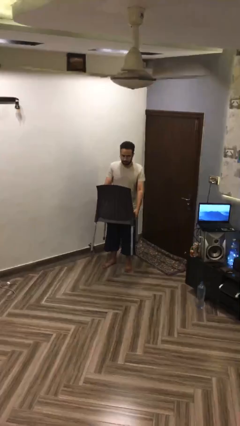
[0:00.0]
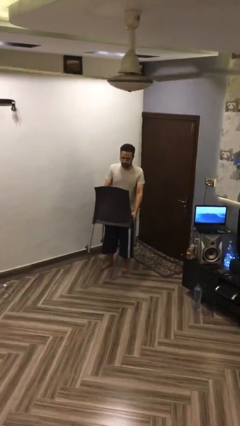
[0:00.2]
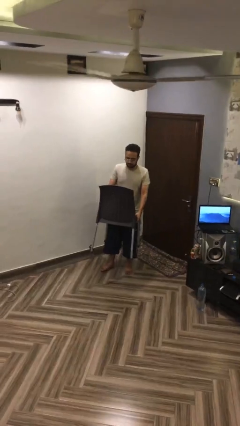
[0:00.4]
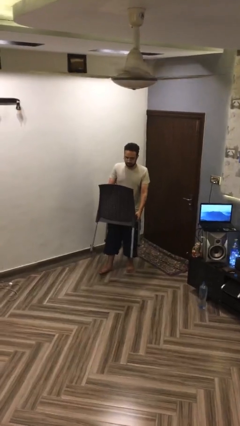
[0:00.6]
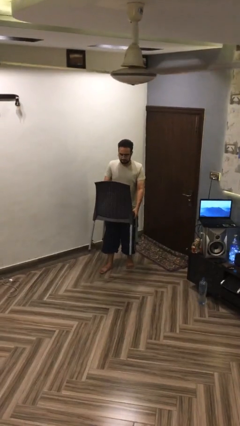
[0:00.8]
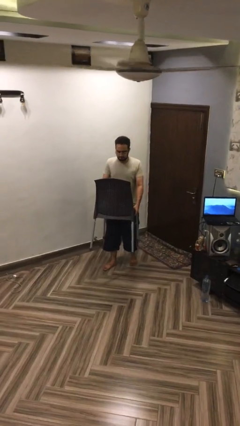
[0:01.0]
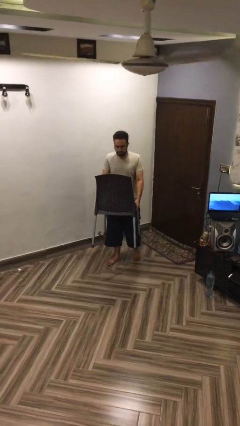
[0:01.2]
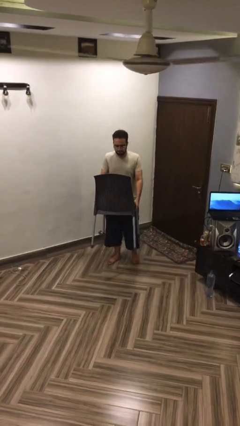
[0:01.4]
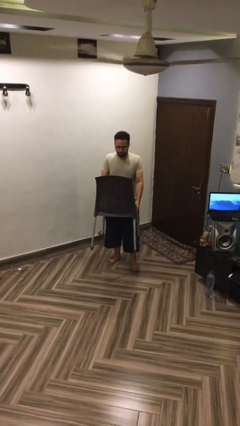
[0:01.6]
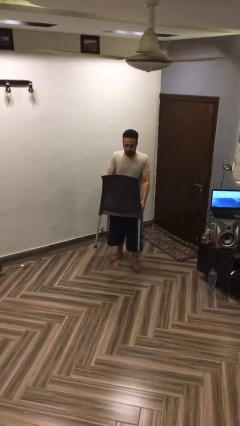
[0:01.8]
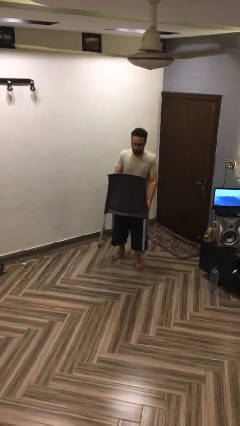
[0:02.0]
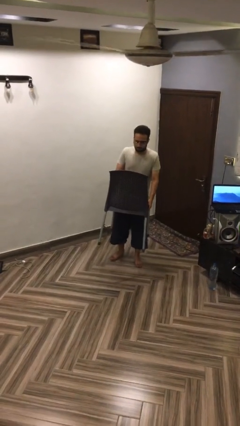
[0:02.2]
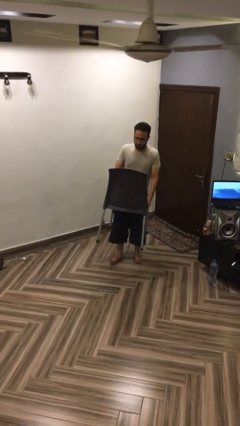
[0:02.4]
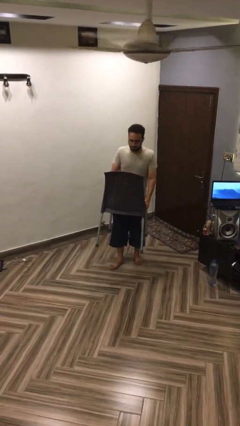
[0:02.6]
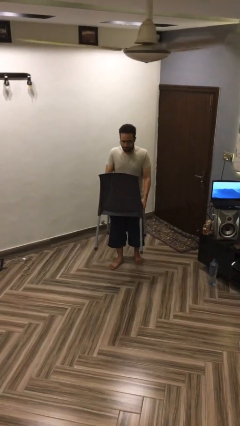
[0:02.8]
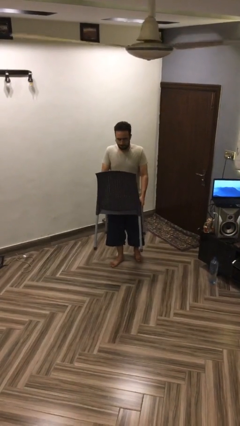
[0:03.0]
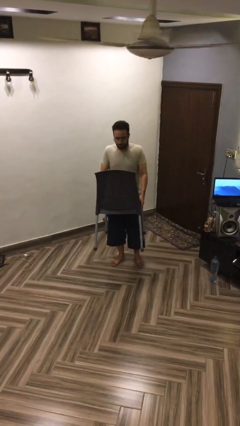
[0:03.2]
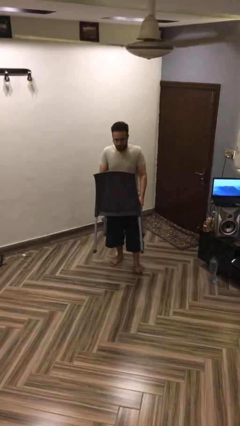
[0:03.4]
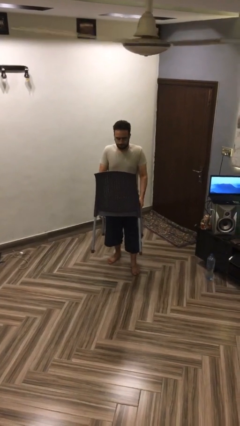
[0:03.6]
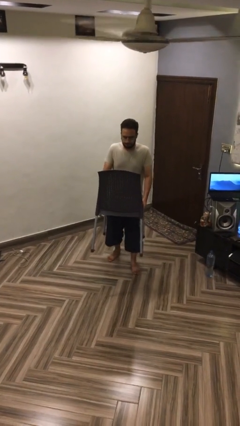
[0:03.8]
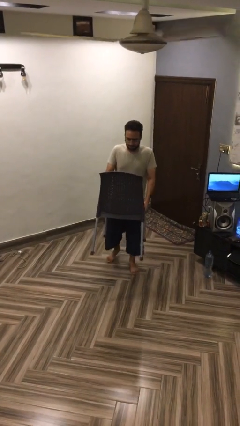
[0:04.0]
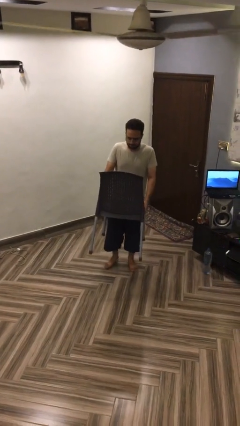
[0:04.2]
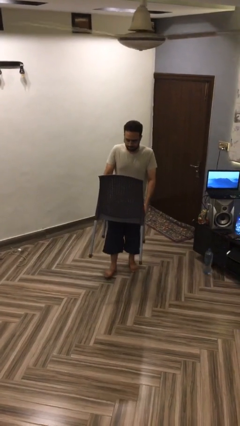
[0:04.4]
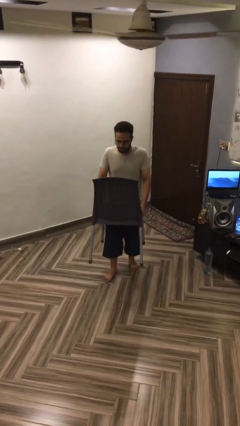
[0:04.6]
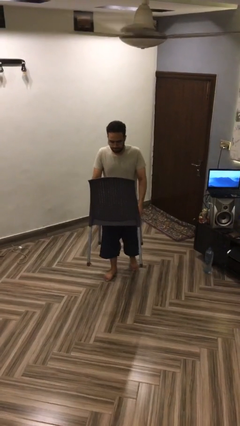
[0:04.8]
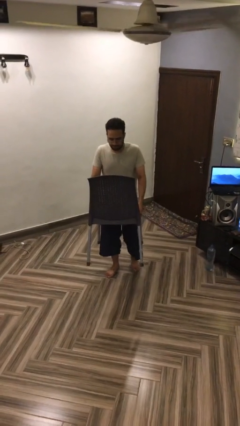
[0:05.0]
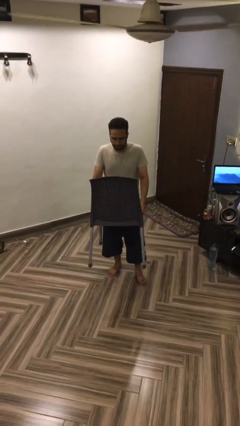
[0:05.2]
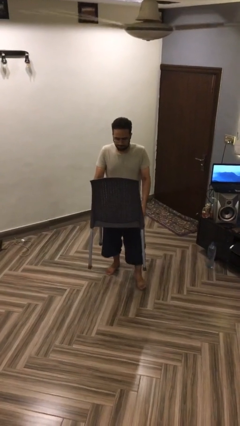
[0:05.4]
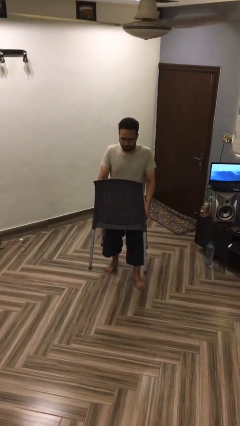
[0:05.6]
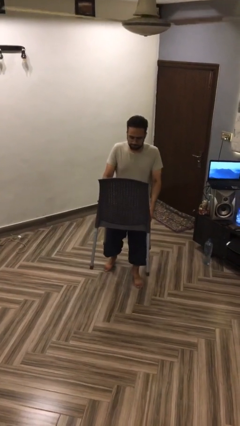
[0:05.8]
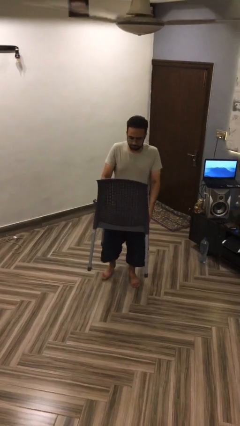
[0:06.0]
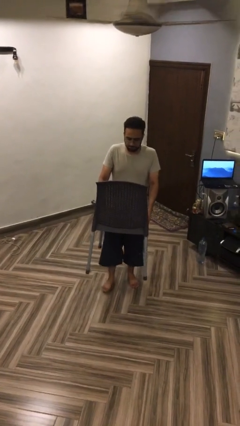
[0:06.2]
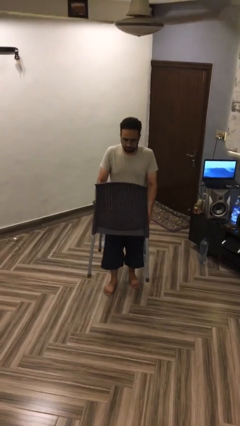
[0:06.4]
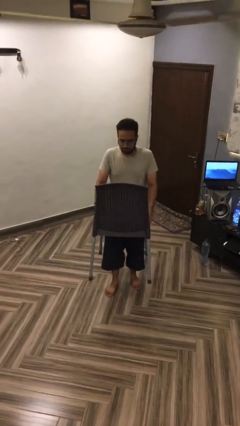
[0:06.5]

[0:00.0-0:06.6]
person carries heavy object

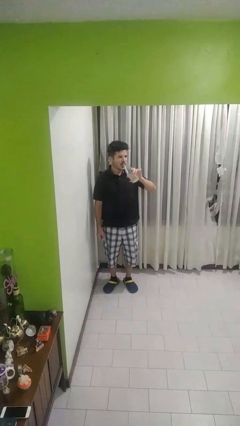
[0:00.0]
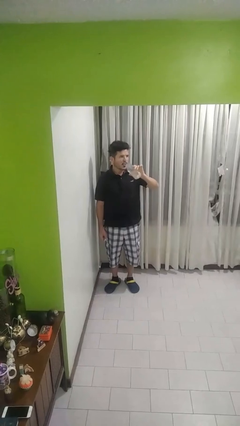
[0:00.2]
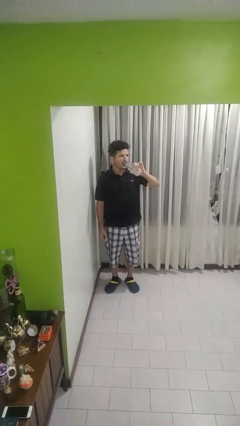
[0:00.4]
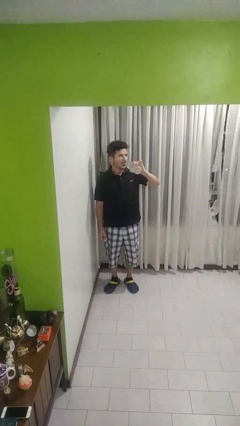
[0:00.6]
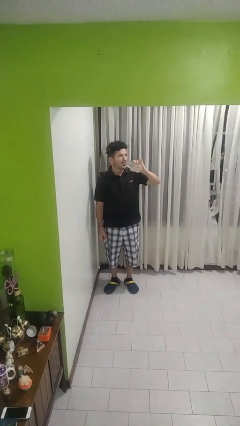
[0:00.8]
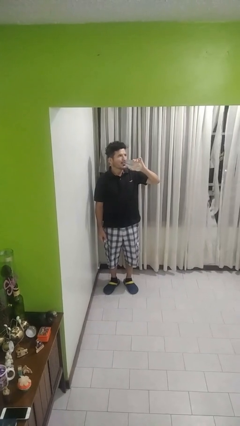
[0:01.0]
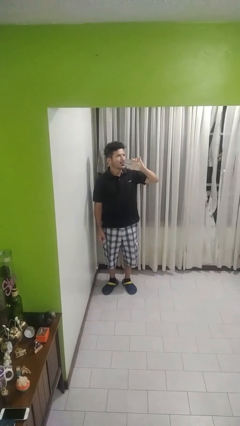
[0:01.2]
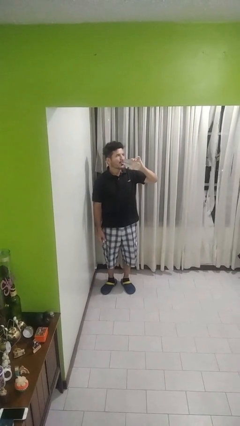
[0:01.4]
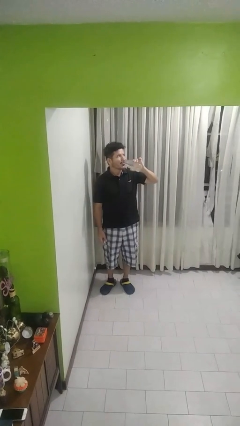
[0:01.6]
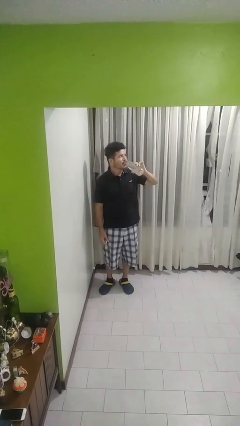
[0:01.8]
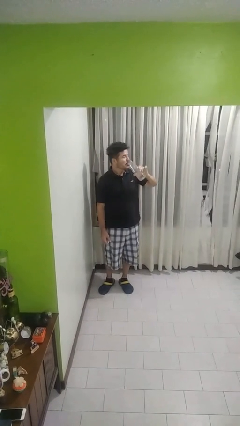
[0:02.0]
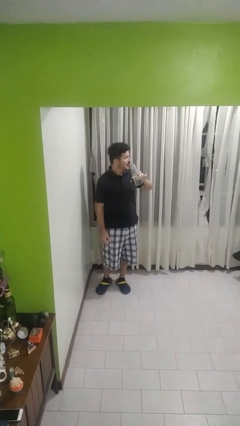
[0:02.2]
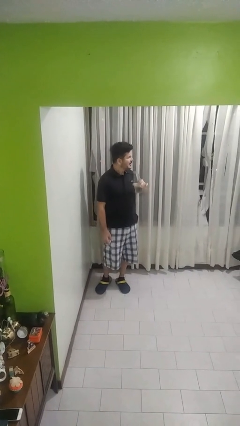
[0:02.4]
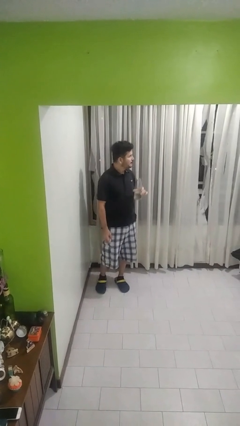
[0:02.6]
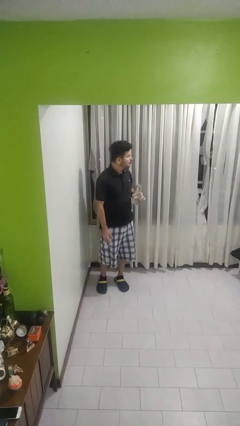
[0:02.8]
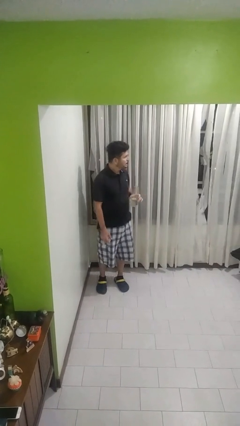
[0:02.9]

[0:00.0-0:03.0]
person drinks from bottle

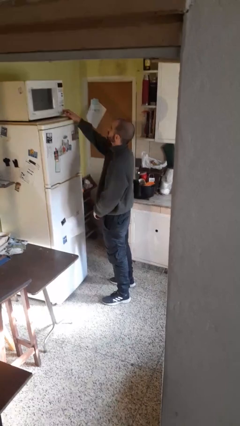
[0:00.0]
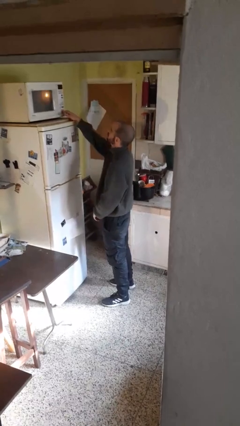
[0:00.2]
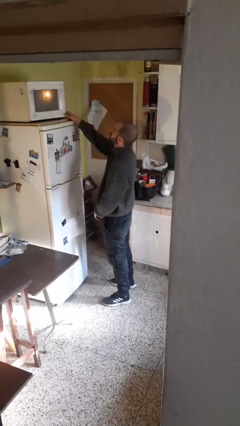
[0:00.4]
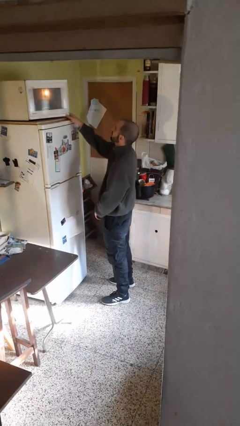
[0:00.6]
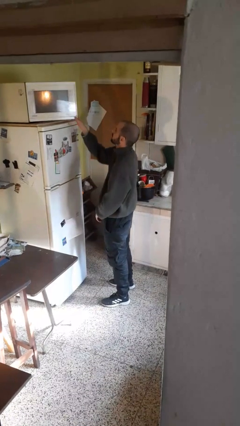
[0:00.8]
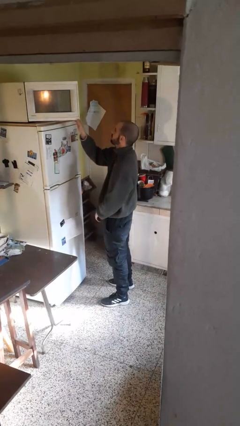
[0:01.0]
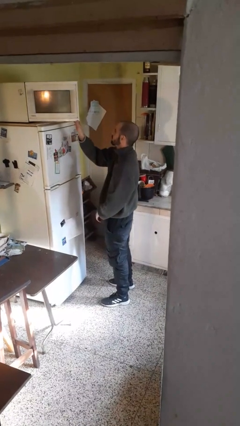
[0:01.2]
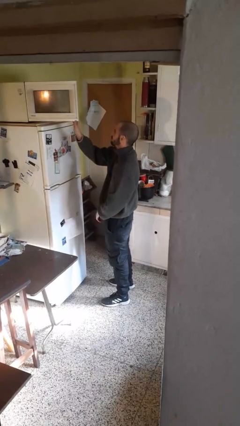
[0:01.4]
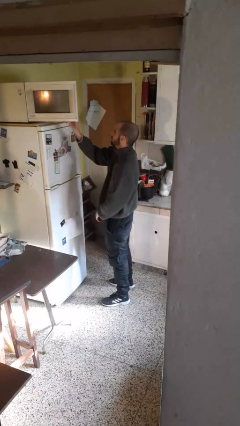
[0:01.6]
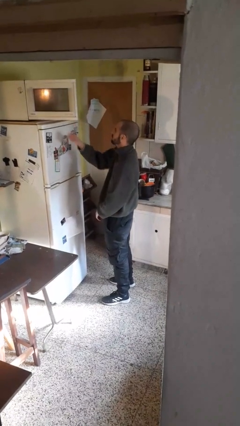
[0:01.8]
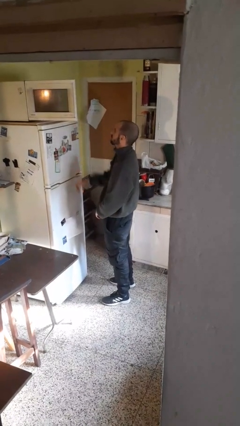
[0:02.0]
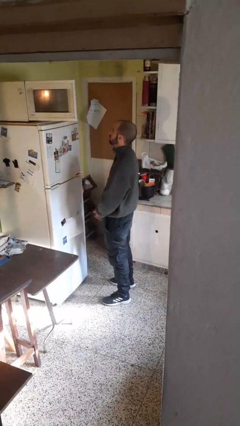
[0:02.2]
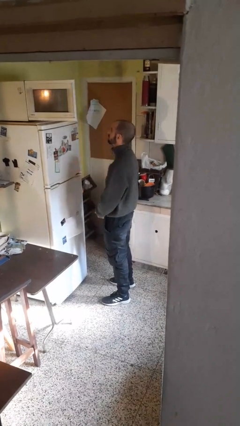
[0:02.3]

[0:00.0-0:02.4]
person opens microwave

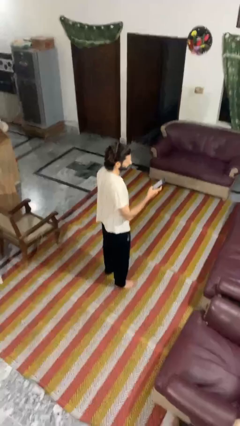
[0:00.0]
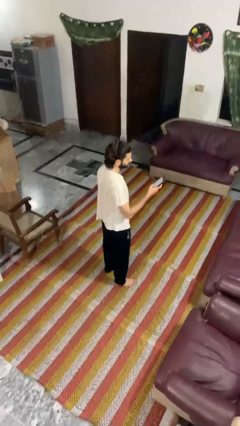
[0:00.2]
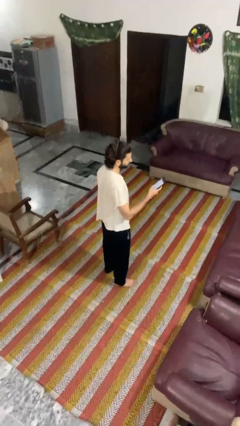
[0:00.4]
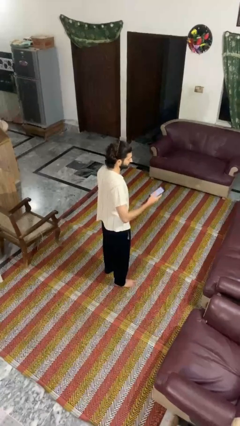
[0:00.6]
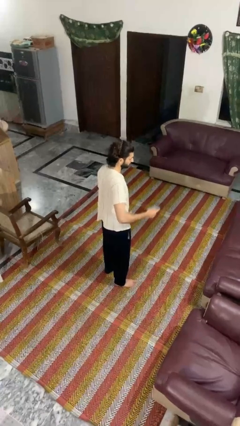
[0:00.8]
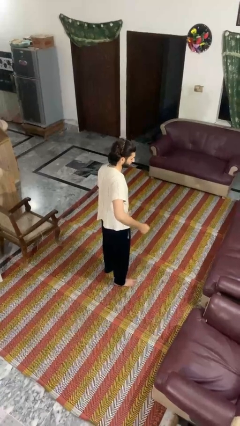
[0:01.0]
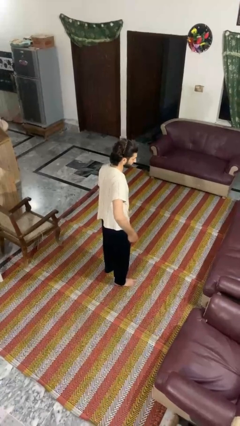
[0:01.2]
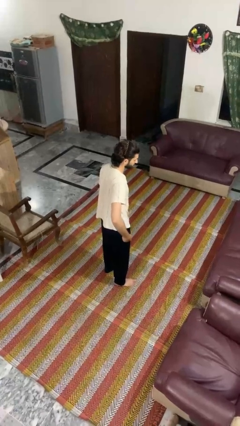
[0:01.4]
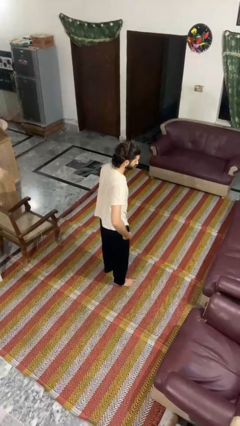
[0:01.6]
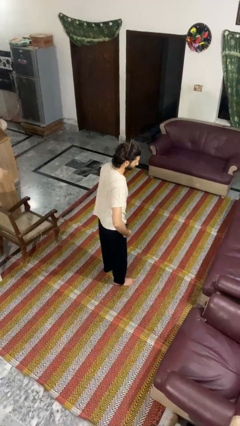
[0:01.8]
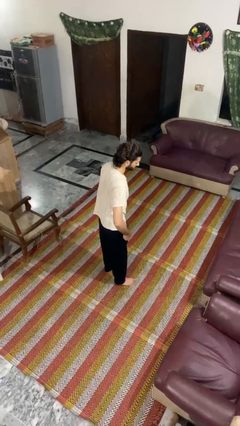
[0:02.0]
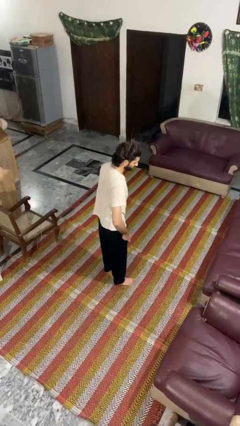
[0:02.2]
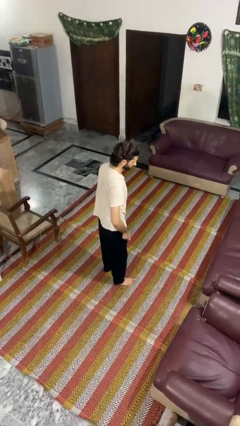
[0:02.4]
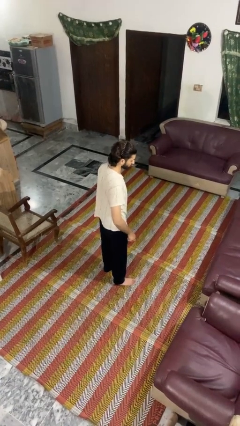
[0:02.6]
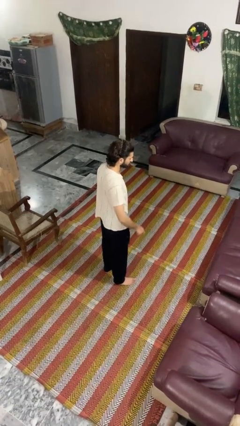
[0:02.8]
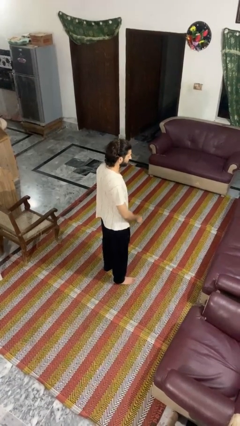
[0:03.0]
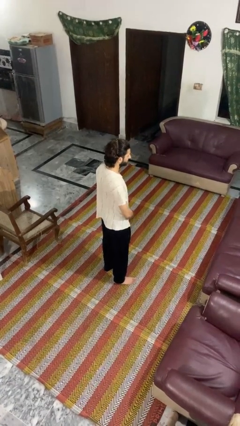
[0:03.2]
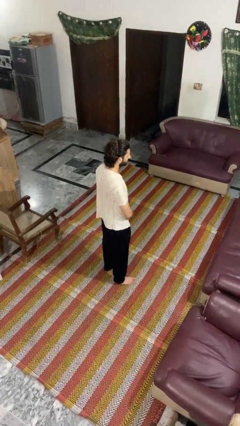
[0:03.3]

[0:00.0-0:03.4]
person puts phone into pocket

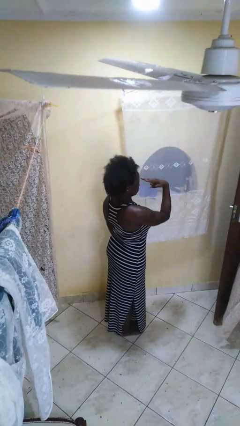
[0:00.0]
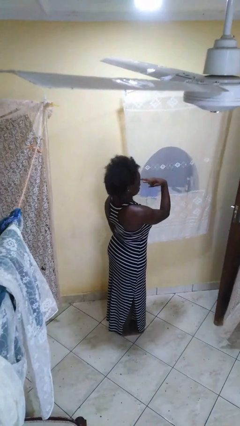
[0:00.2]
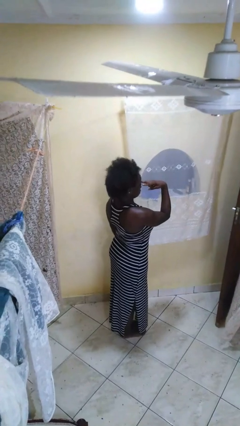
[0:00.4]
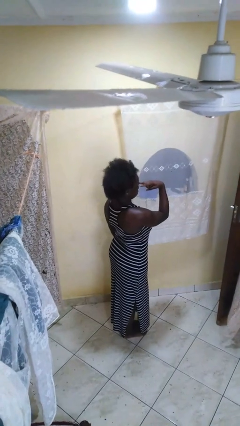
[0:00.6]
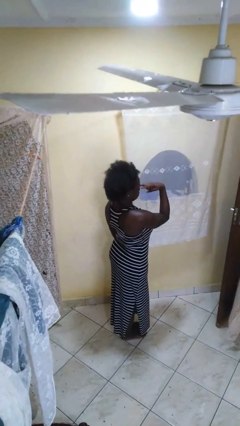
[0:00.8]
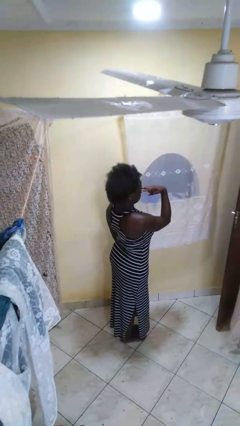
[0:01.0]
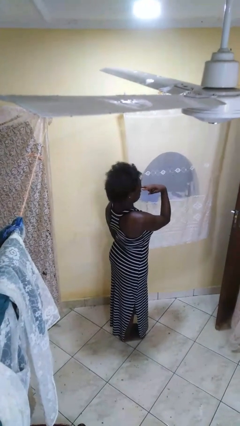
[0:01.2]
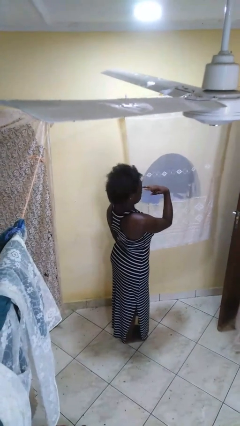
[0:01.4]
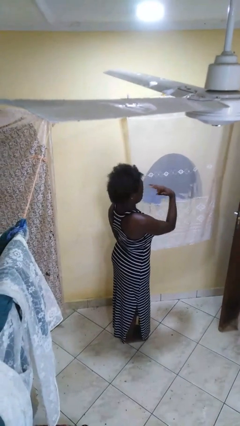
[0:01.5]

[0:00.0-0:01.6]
person gestures watch closely

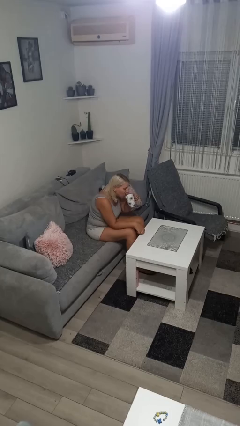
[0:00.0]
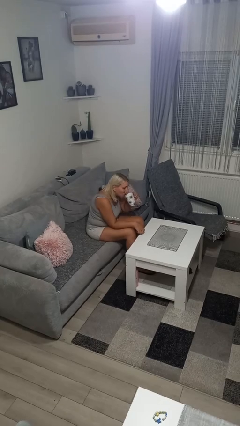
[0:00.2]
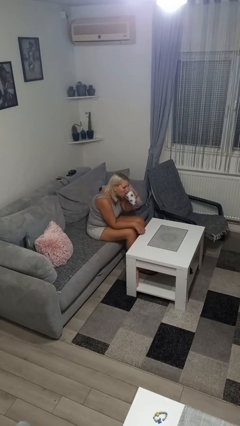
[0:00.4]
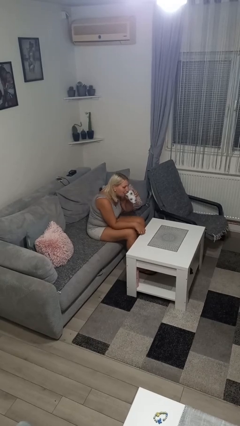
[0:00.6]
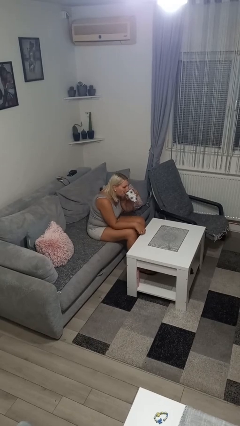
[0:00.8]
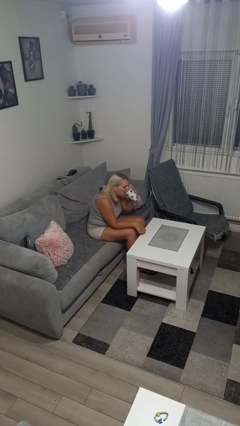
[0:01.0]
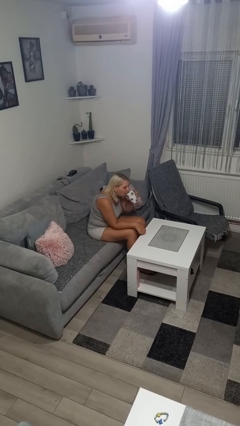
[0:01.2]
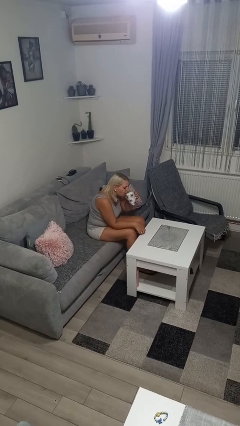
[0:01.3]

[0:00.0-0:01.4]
person drinks from mug
